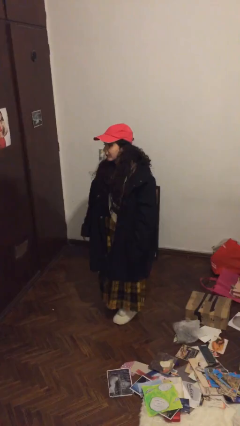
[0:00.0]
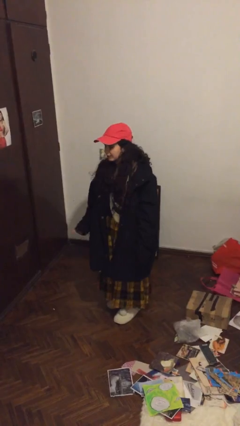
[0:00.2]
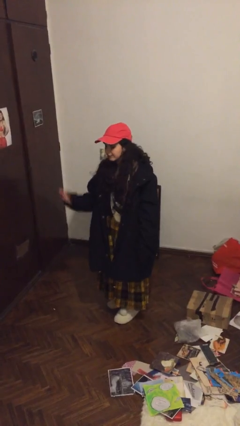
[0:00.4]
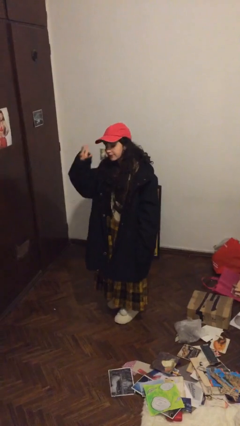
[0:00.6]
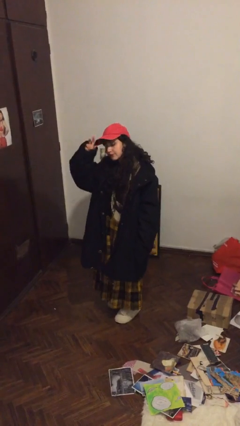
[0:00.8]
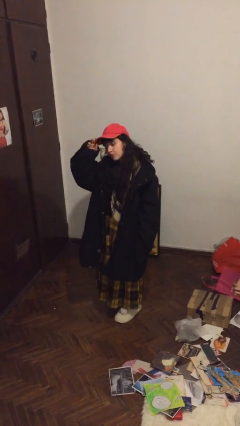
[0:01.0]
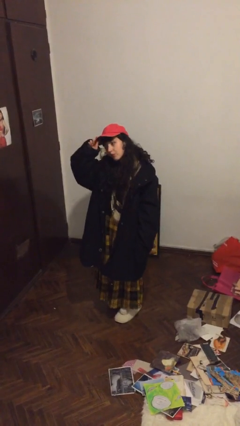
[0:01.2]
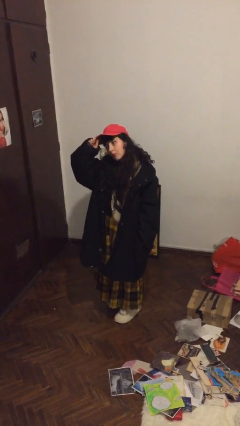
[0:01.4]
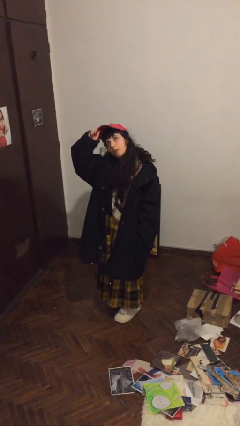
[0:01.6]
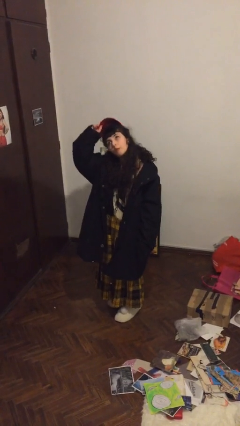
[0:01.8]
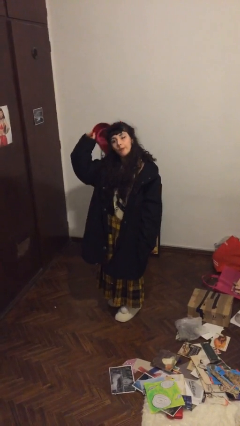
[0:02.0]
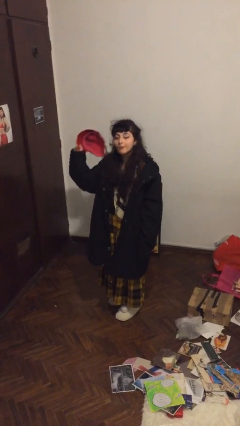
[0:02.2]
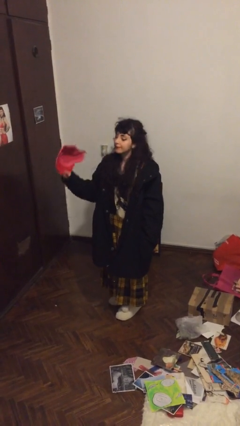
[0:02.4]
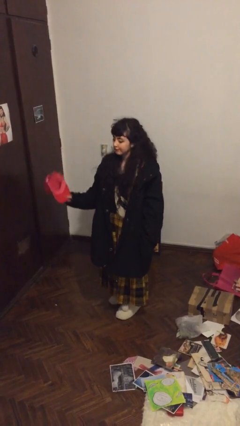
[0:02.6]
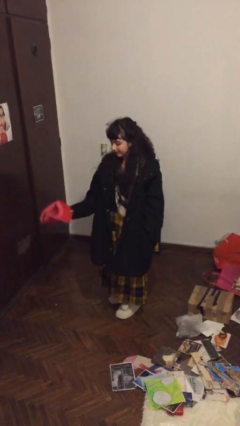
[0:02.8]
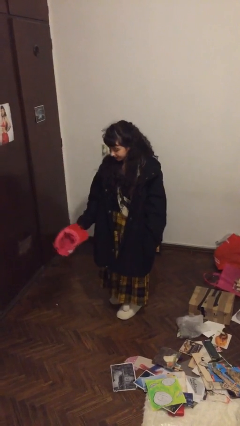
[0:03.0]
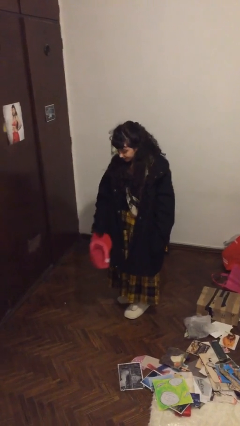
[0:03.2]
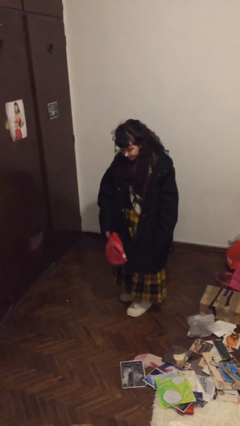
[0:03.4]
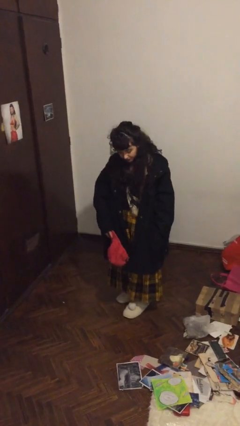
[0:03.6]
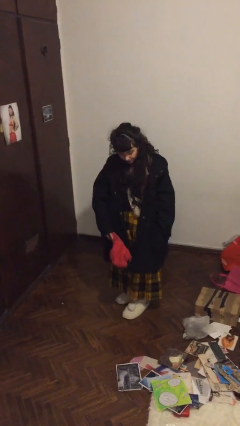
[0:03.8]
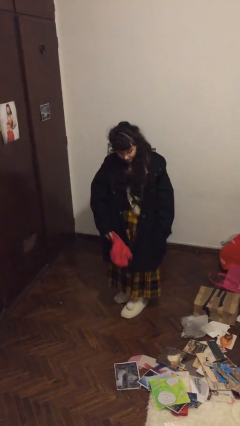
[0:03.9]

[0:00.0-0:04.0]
person takes off hat

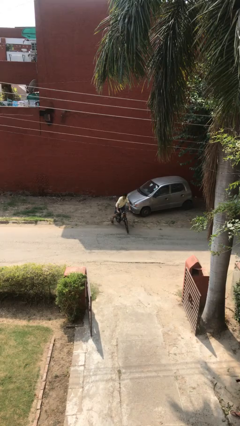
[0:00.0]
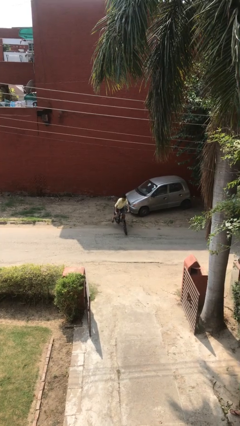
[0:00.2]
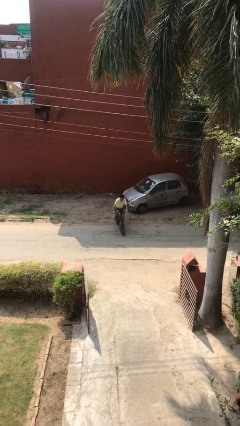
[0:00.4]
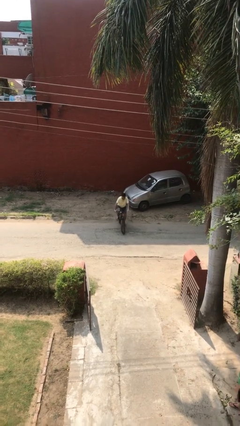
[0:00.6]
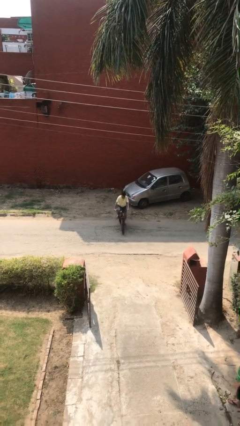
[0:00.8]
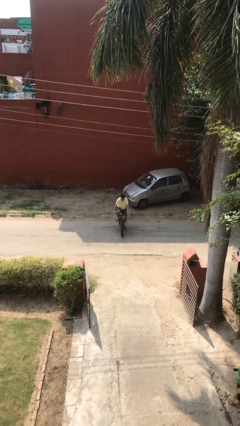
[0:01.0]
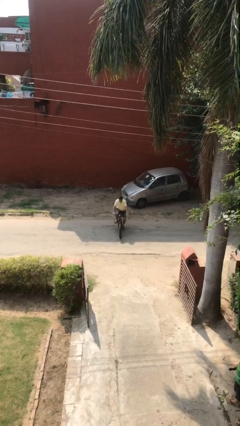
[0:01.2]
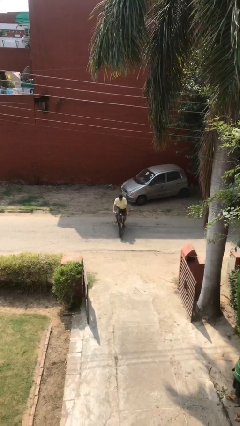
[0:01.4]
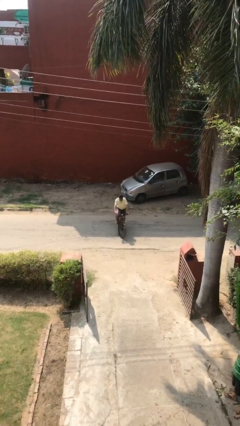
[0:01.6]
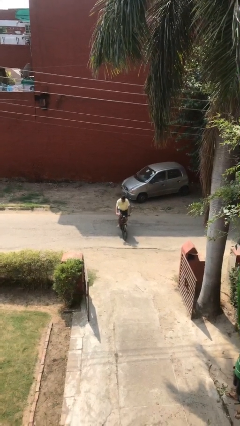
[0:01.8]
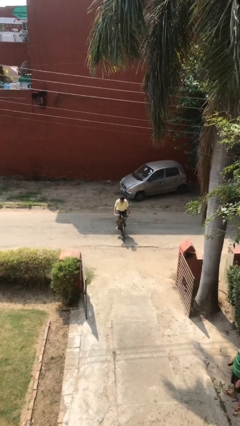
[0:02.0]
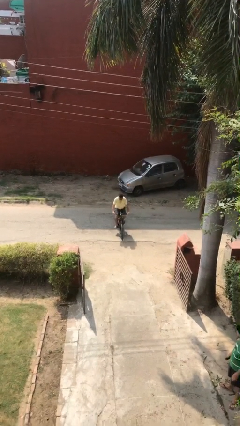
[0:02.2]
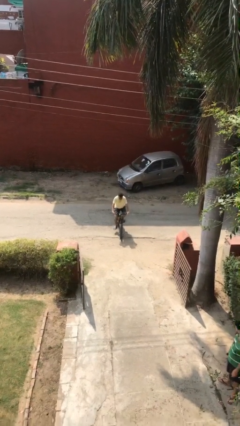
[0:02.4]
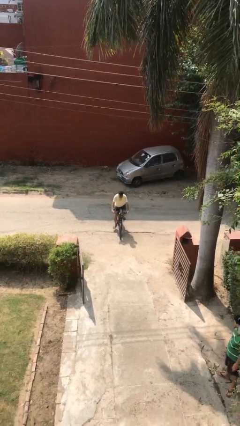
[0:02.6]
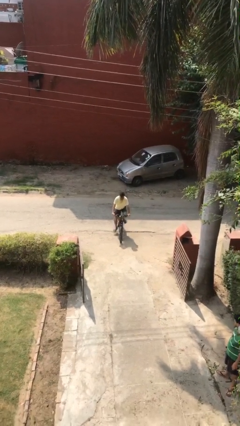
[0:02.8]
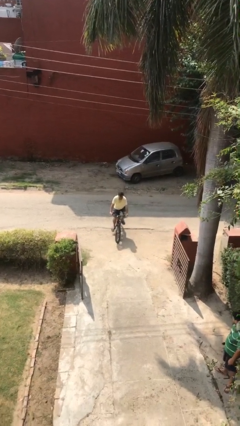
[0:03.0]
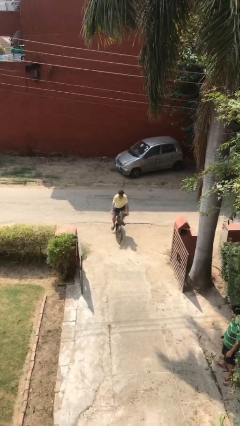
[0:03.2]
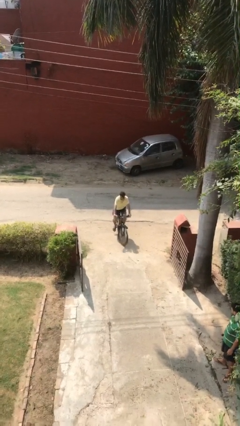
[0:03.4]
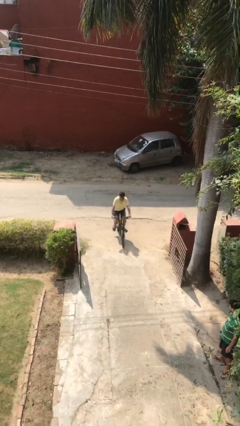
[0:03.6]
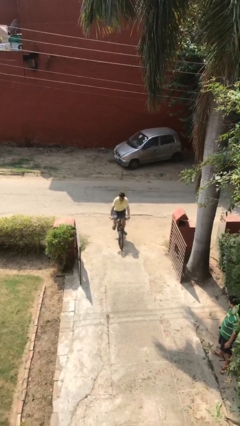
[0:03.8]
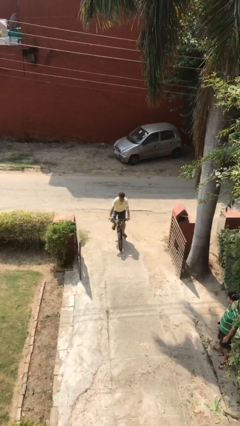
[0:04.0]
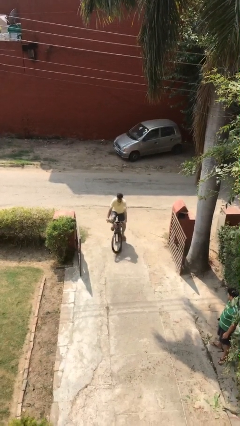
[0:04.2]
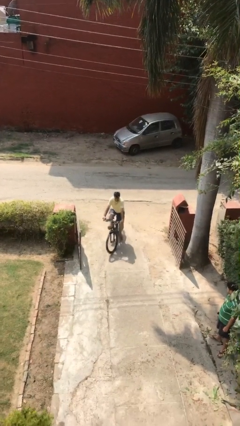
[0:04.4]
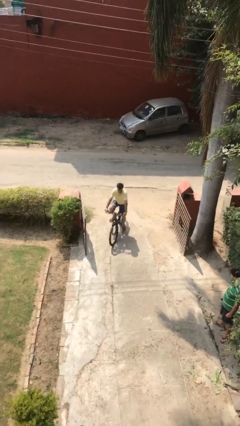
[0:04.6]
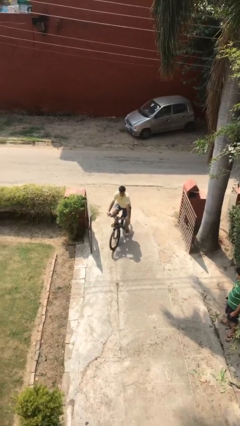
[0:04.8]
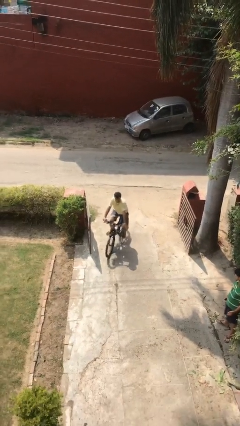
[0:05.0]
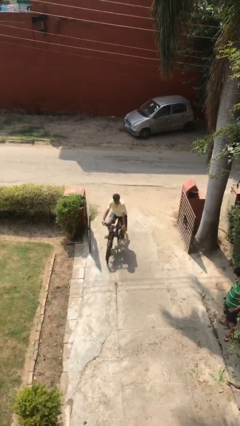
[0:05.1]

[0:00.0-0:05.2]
person rides bicycle

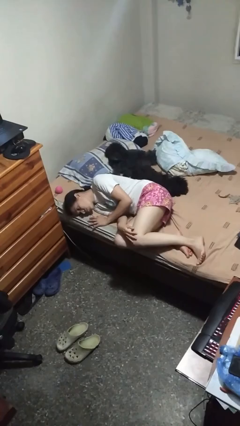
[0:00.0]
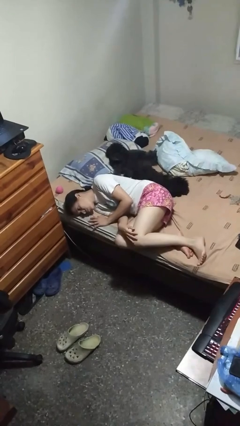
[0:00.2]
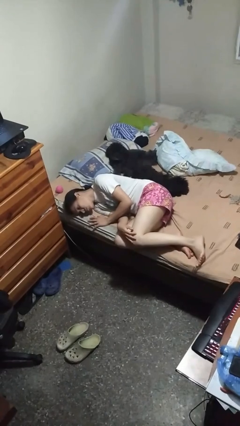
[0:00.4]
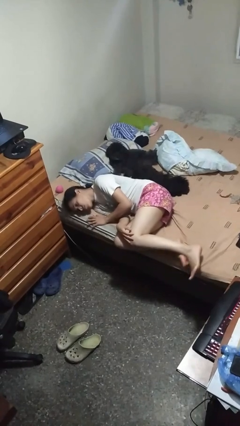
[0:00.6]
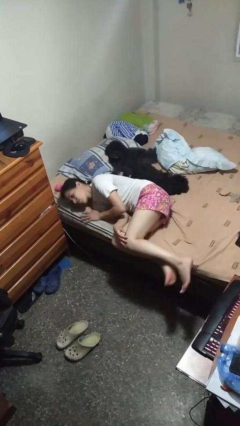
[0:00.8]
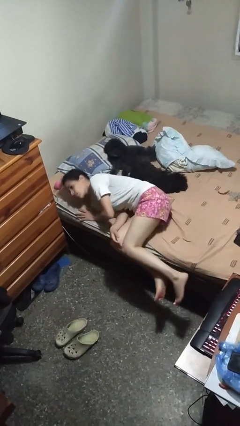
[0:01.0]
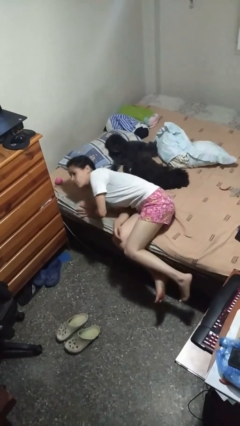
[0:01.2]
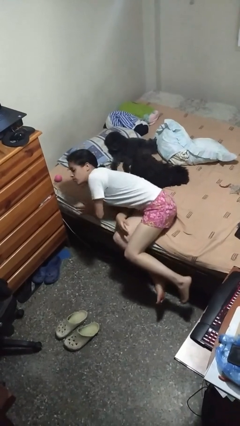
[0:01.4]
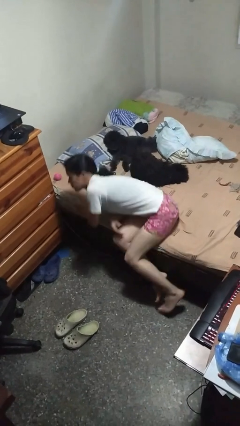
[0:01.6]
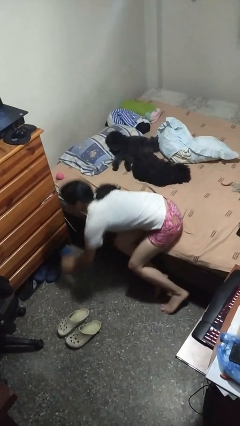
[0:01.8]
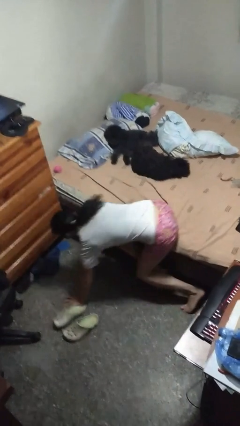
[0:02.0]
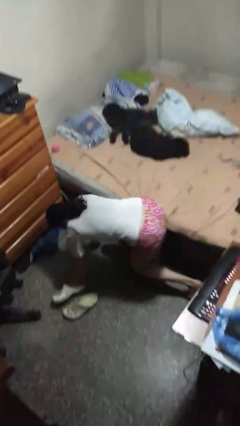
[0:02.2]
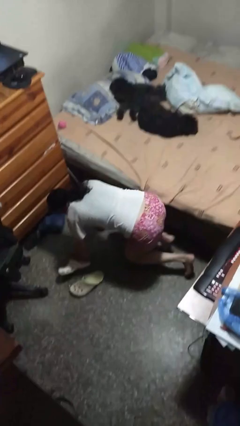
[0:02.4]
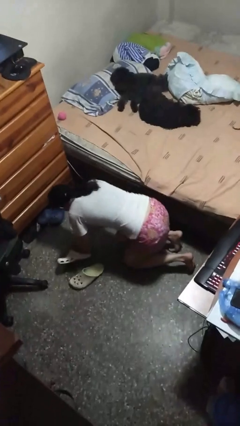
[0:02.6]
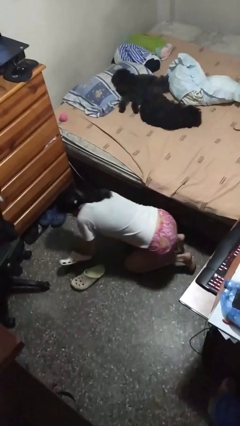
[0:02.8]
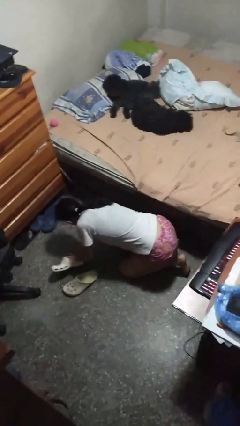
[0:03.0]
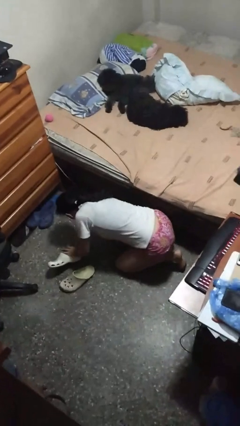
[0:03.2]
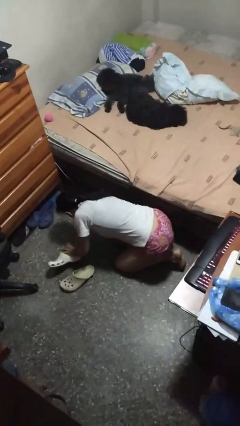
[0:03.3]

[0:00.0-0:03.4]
person falls from bed

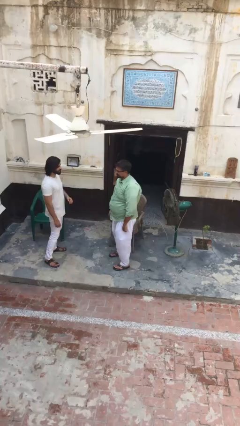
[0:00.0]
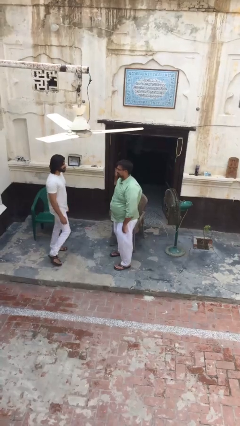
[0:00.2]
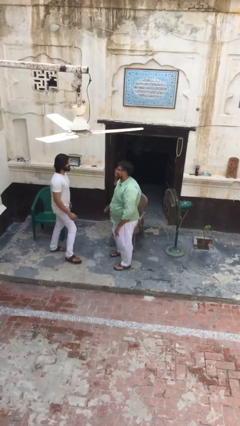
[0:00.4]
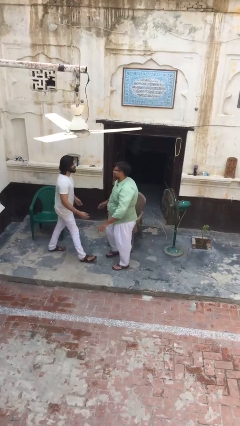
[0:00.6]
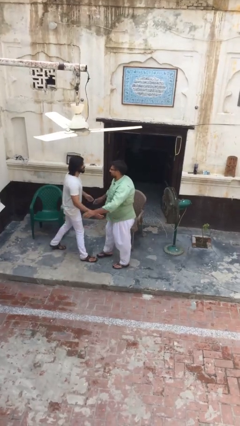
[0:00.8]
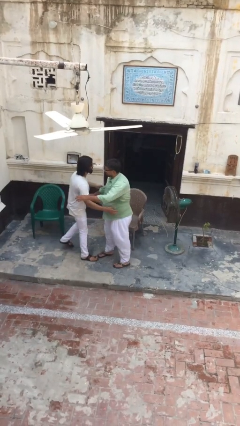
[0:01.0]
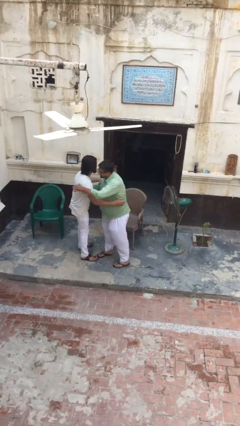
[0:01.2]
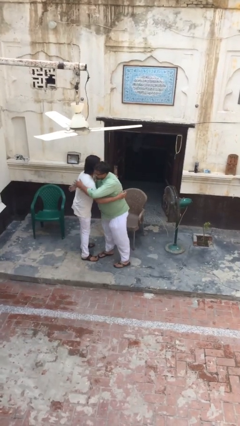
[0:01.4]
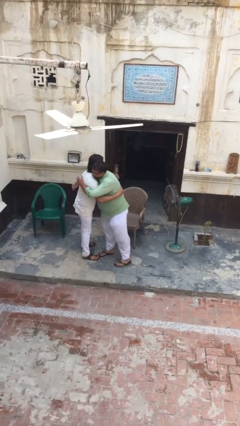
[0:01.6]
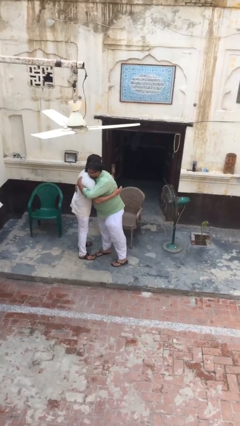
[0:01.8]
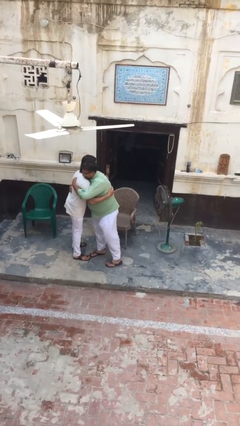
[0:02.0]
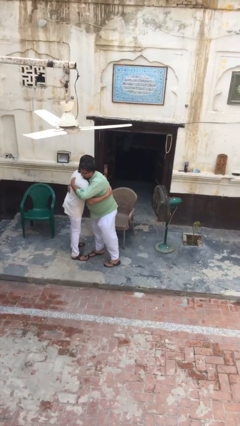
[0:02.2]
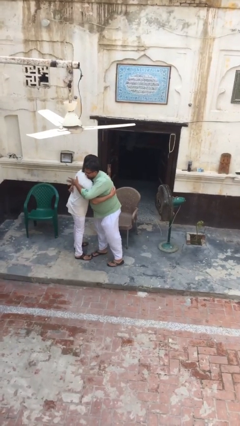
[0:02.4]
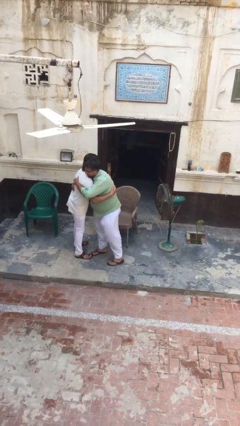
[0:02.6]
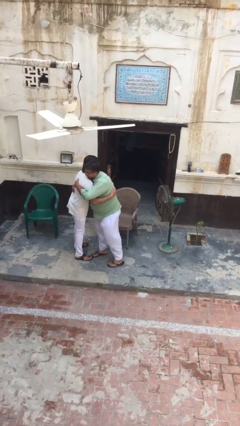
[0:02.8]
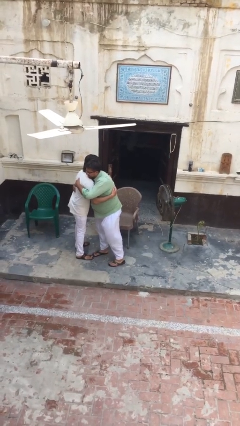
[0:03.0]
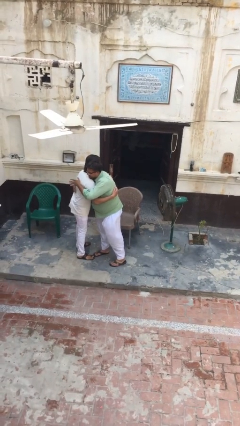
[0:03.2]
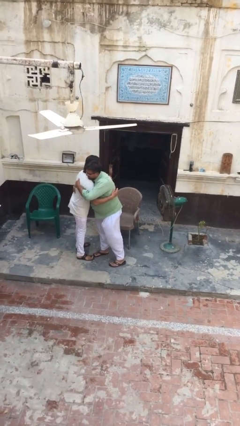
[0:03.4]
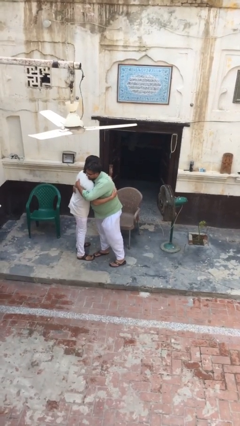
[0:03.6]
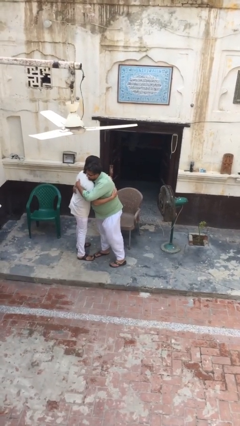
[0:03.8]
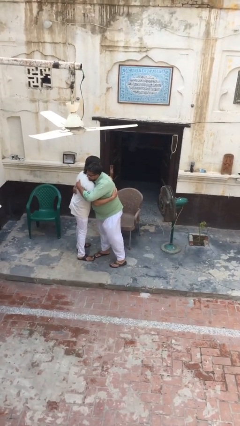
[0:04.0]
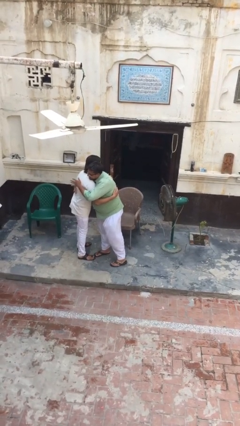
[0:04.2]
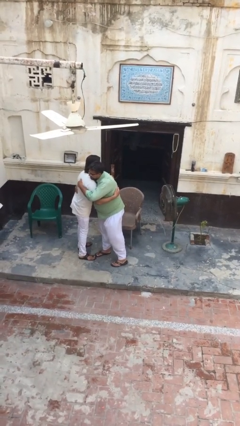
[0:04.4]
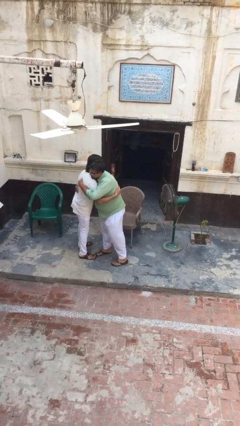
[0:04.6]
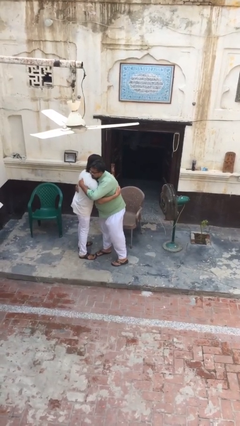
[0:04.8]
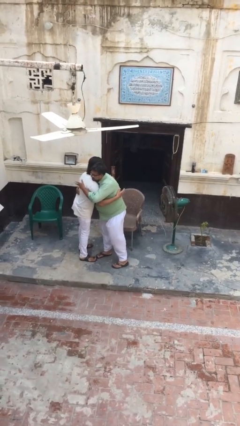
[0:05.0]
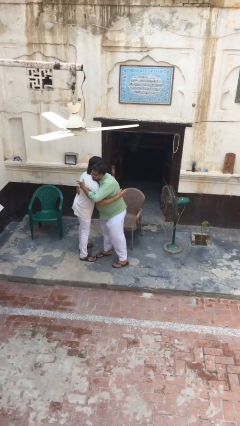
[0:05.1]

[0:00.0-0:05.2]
person embraces person
